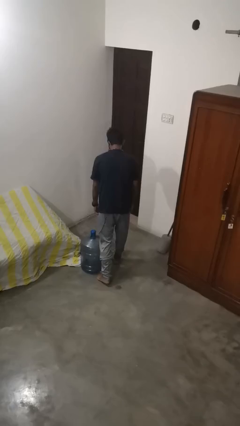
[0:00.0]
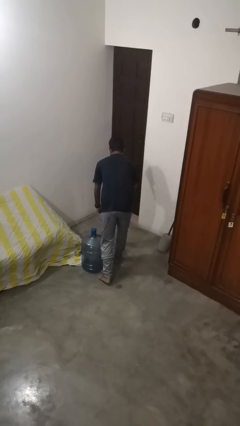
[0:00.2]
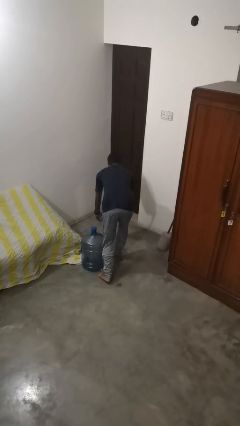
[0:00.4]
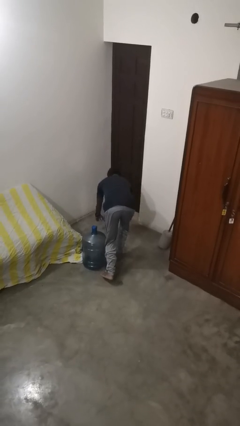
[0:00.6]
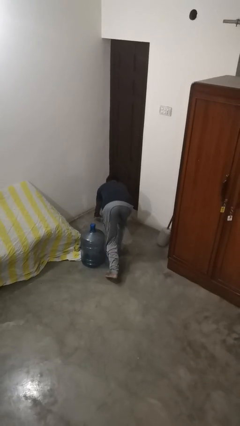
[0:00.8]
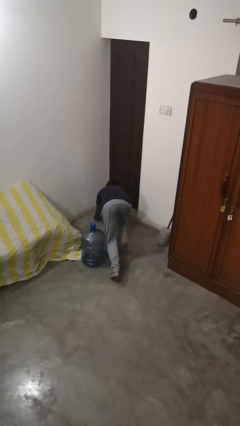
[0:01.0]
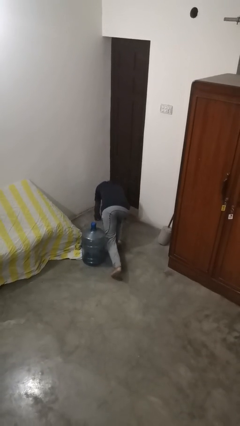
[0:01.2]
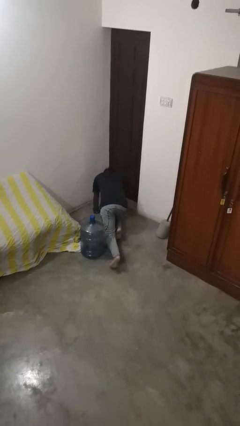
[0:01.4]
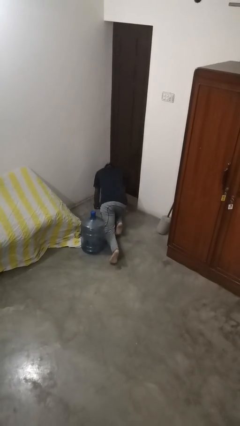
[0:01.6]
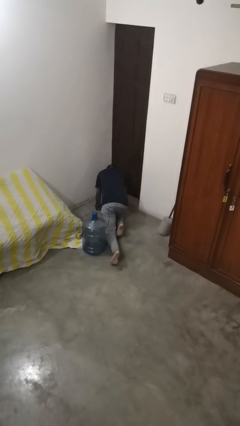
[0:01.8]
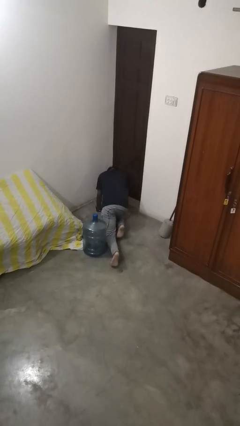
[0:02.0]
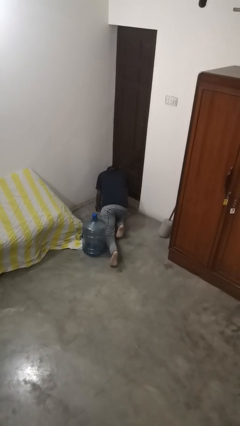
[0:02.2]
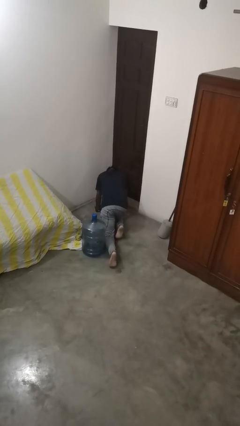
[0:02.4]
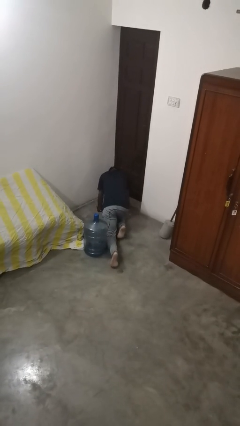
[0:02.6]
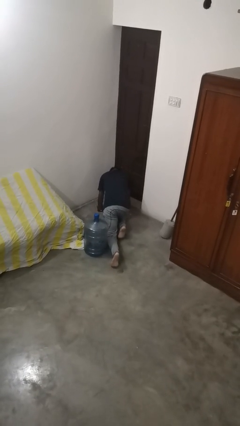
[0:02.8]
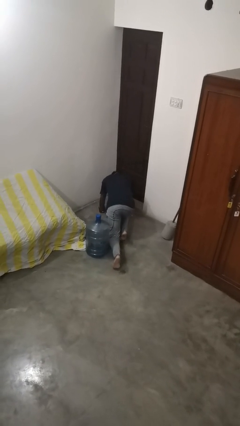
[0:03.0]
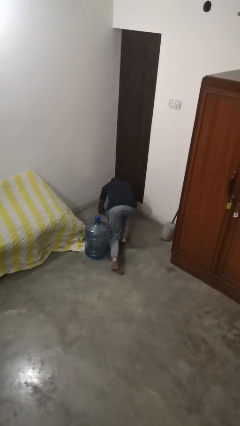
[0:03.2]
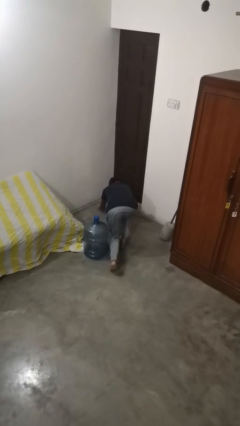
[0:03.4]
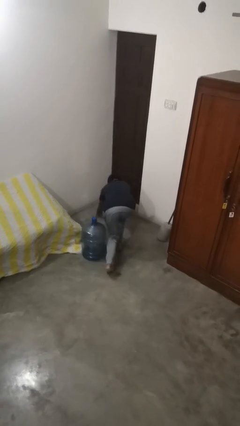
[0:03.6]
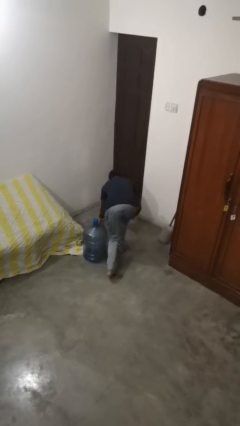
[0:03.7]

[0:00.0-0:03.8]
person lies down on floor

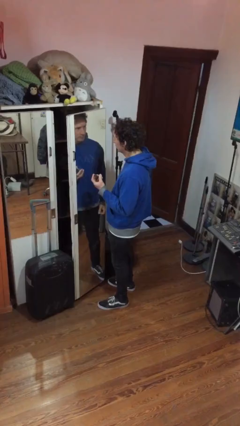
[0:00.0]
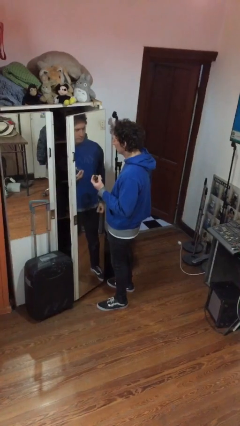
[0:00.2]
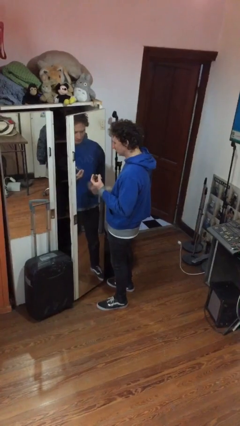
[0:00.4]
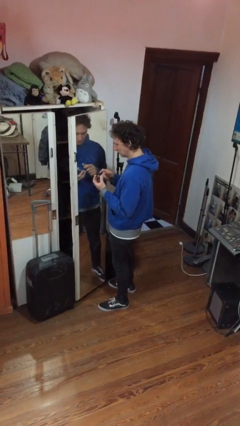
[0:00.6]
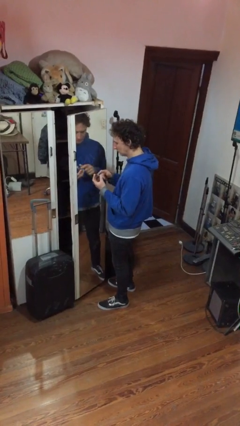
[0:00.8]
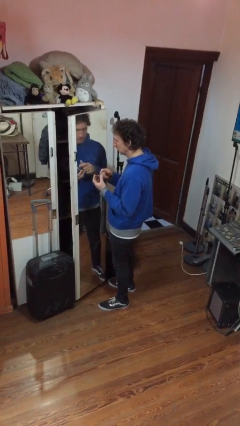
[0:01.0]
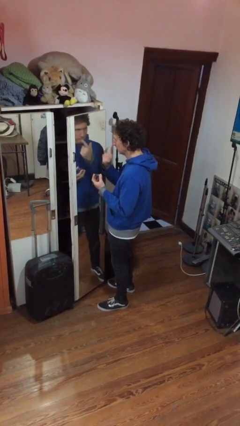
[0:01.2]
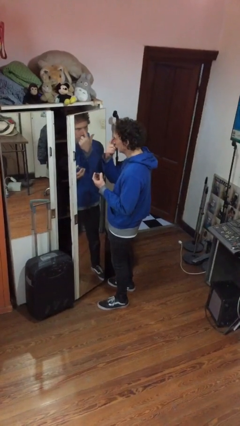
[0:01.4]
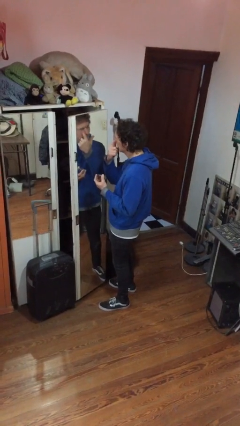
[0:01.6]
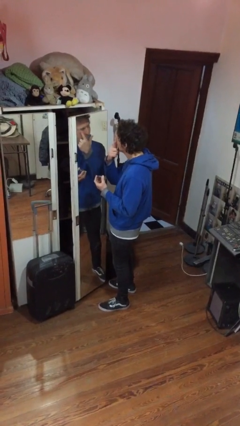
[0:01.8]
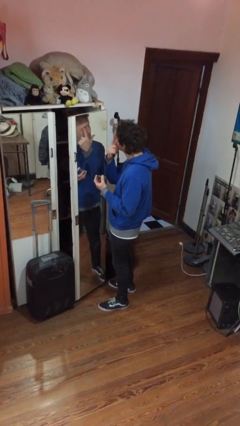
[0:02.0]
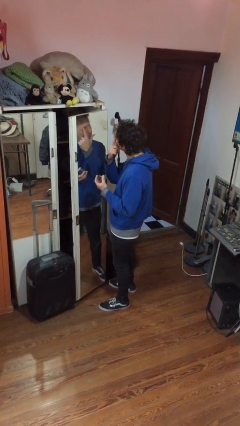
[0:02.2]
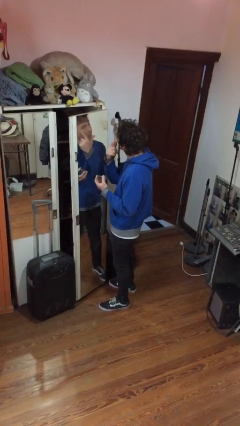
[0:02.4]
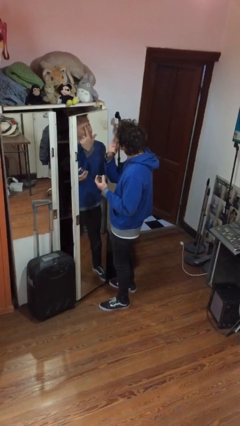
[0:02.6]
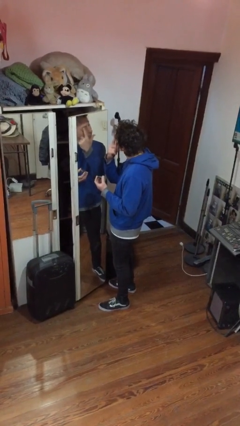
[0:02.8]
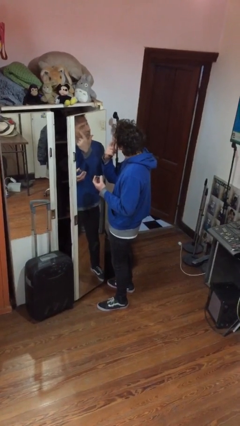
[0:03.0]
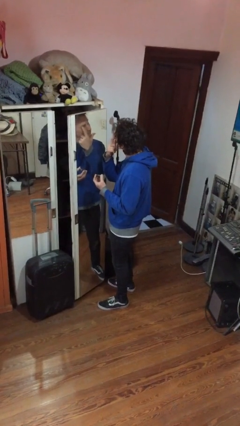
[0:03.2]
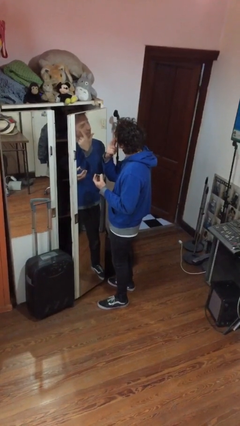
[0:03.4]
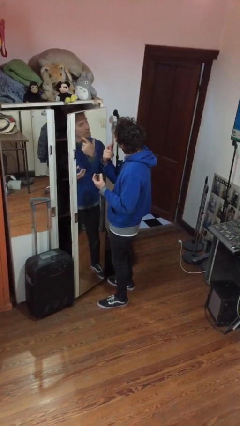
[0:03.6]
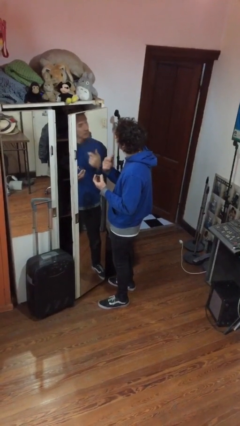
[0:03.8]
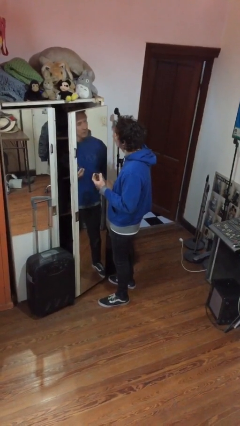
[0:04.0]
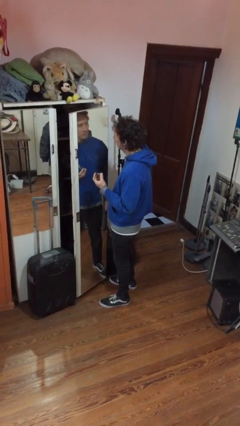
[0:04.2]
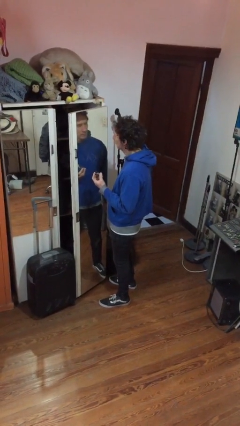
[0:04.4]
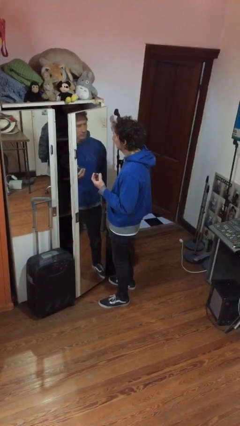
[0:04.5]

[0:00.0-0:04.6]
person applies eye makeup

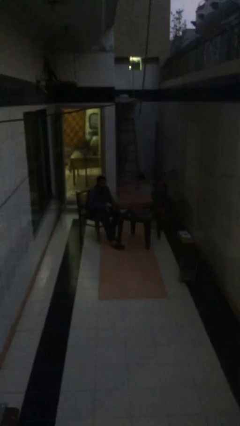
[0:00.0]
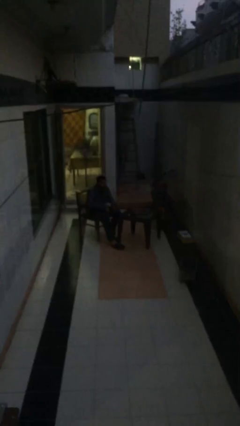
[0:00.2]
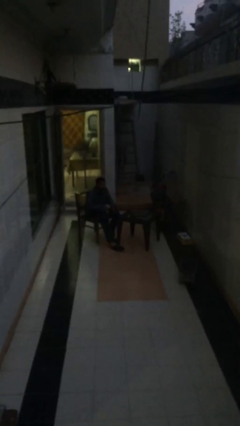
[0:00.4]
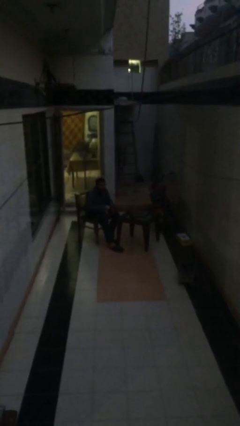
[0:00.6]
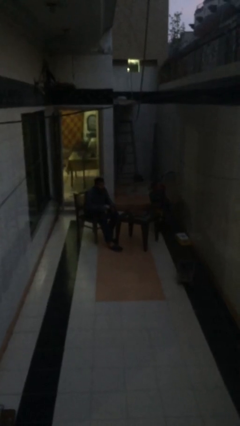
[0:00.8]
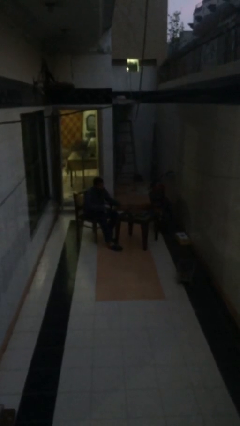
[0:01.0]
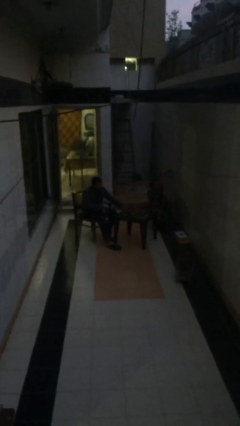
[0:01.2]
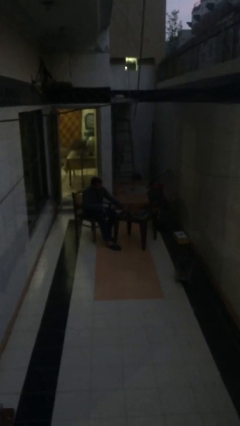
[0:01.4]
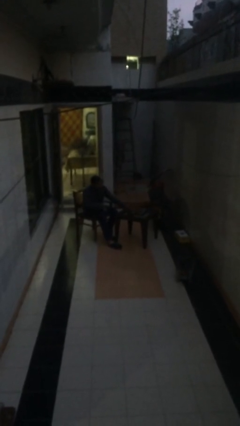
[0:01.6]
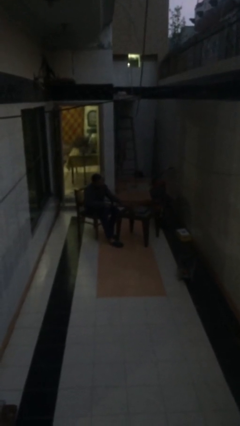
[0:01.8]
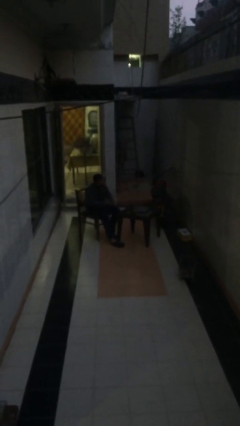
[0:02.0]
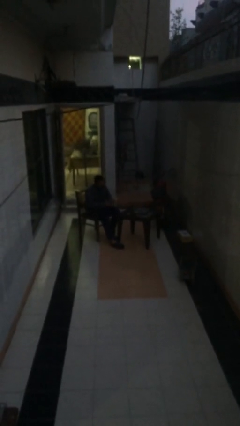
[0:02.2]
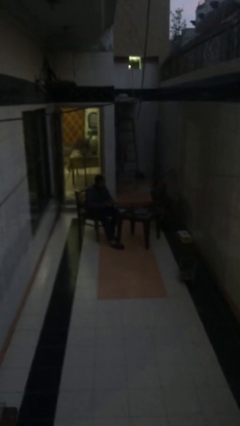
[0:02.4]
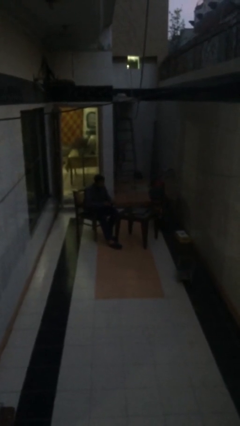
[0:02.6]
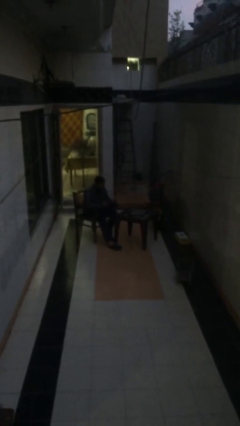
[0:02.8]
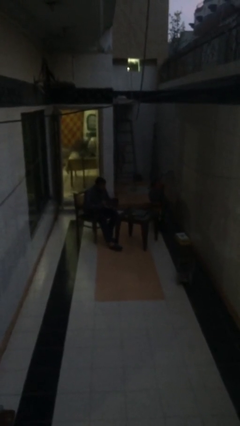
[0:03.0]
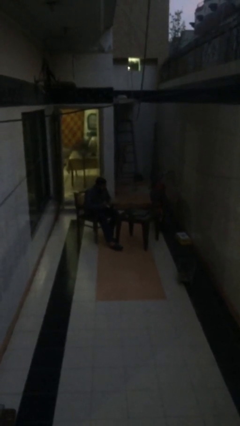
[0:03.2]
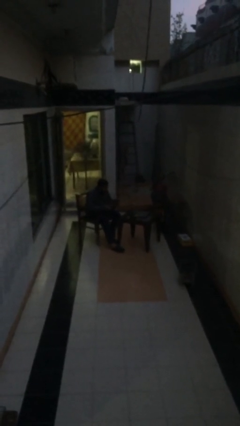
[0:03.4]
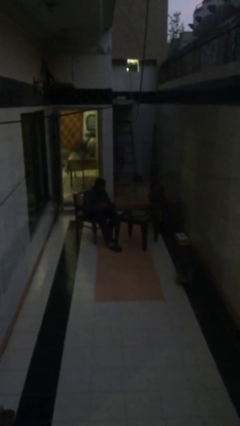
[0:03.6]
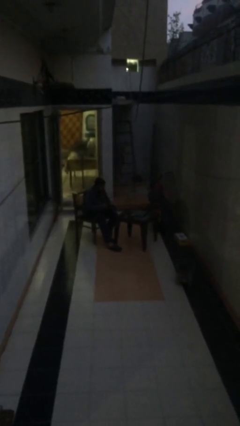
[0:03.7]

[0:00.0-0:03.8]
person picks up object from table

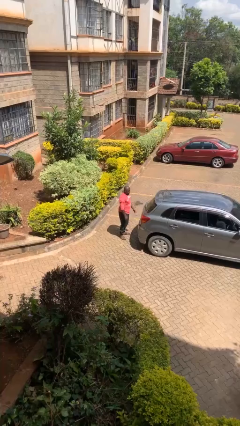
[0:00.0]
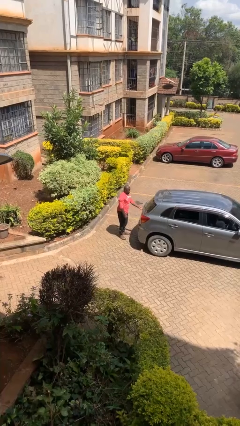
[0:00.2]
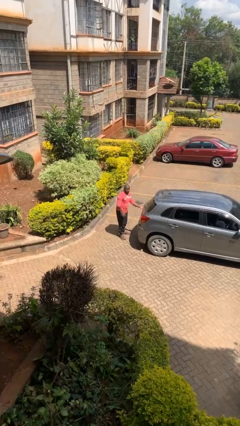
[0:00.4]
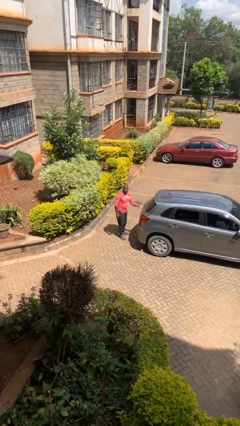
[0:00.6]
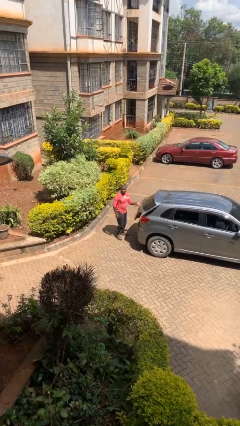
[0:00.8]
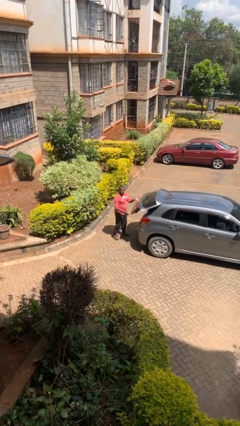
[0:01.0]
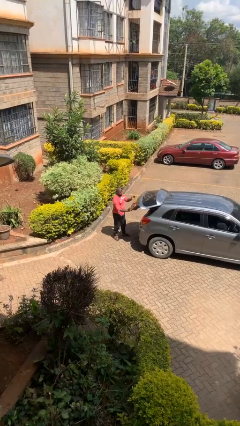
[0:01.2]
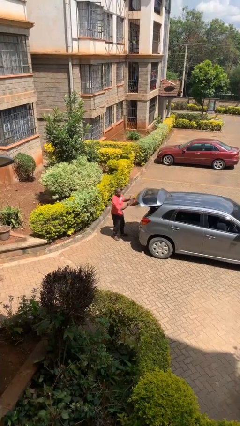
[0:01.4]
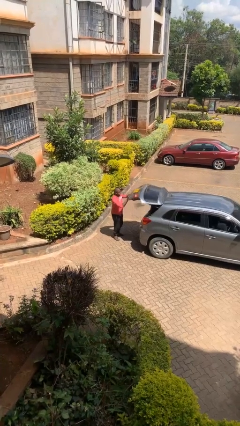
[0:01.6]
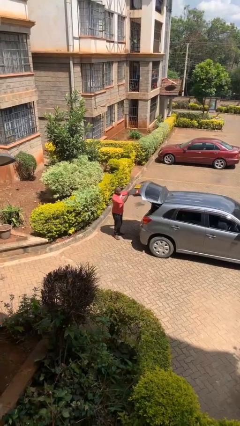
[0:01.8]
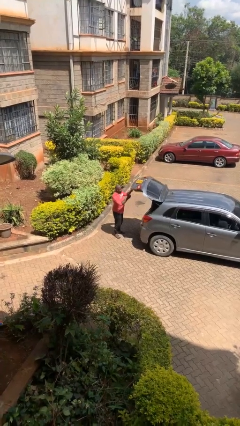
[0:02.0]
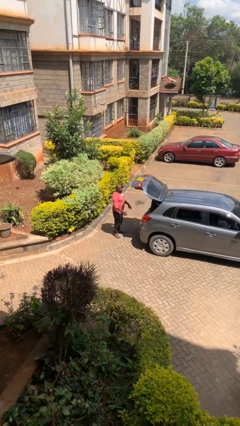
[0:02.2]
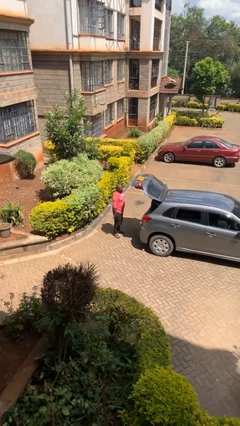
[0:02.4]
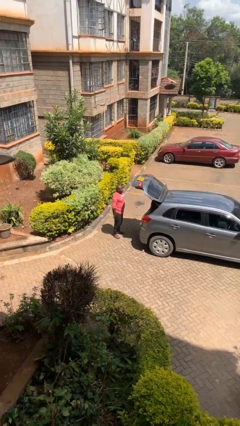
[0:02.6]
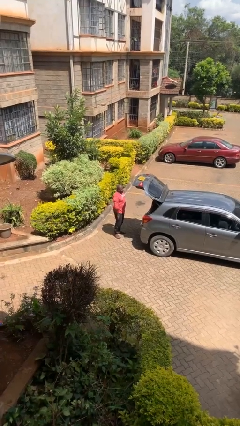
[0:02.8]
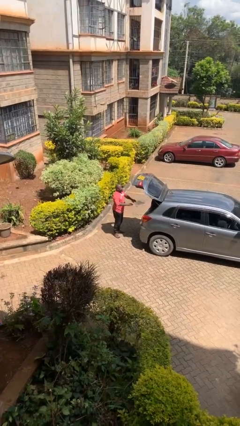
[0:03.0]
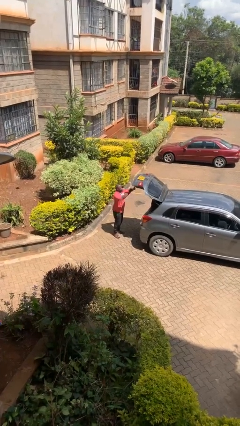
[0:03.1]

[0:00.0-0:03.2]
person opens car trunk

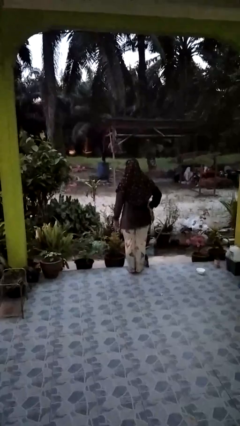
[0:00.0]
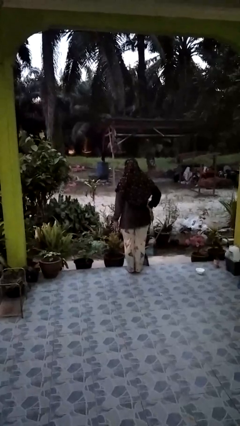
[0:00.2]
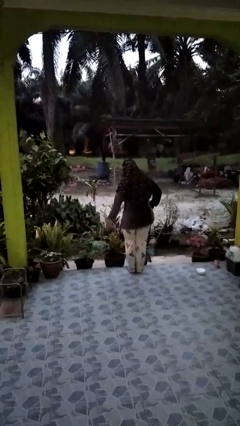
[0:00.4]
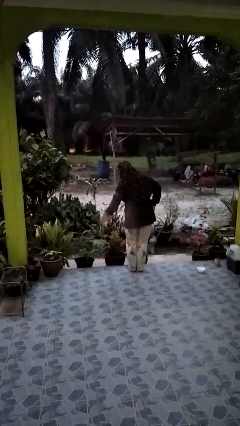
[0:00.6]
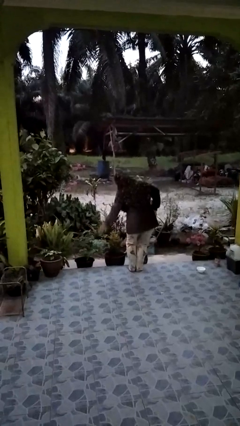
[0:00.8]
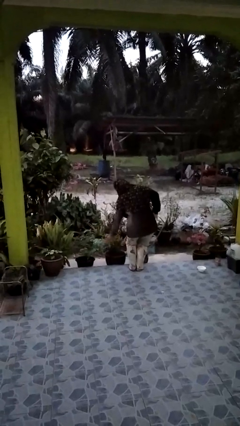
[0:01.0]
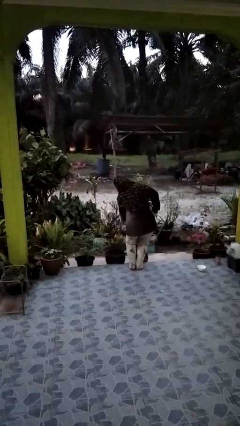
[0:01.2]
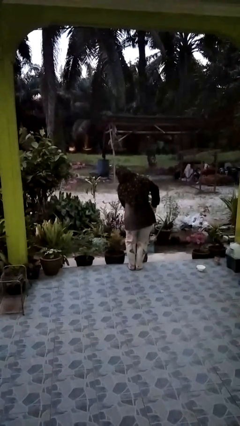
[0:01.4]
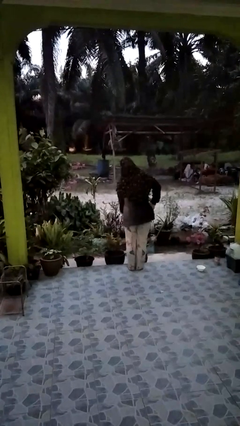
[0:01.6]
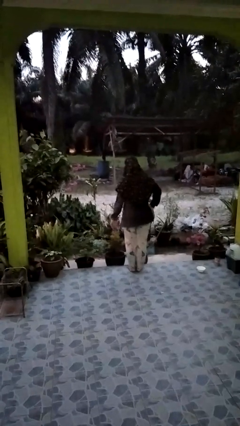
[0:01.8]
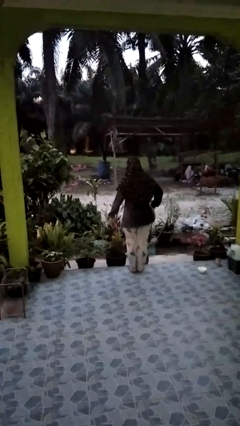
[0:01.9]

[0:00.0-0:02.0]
person waves hand over object

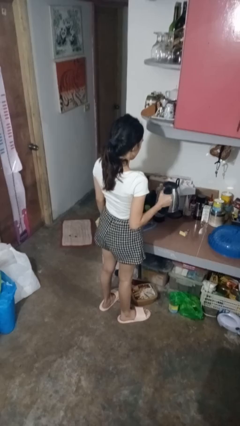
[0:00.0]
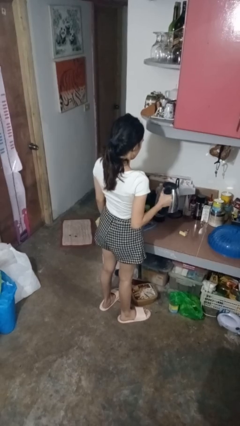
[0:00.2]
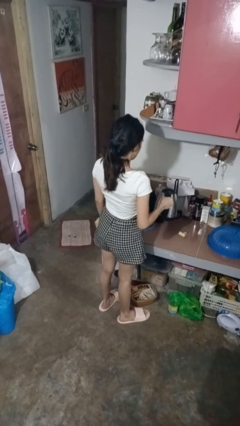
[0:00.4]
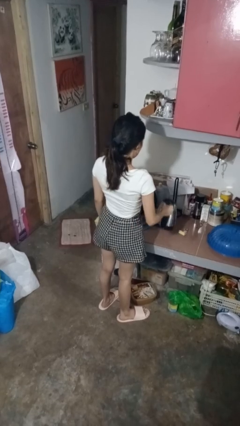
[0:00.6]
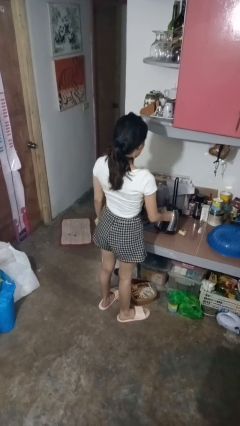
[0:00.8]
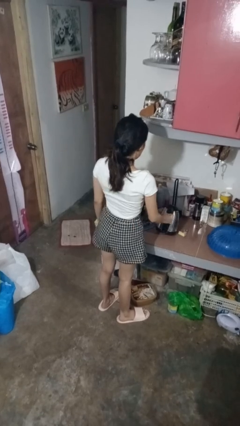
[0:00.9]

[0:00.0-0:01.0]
person puts down object on countertop
